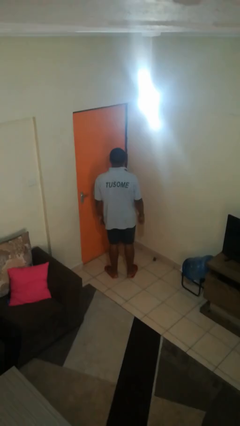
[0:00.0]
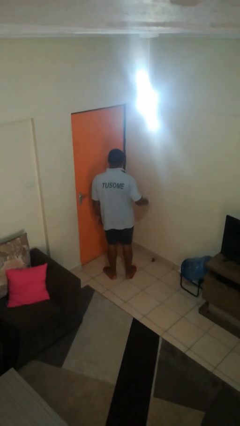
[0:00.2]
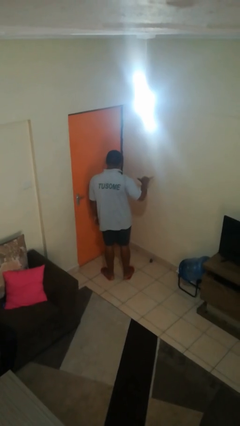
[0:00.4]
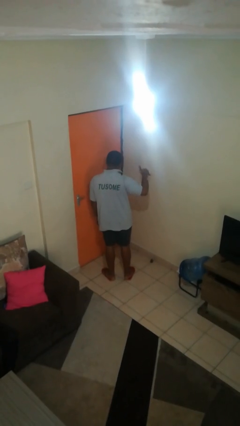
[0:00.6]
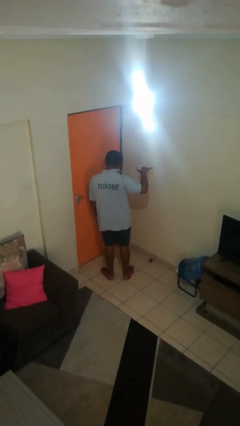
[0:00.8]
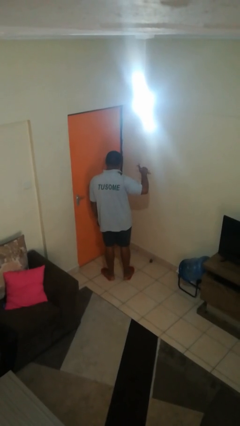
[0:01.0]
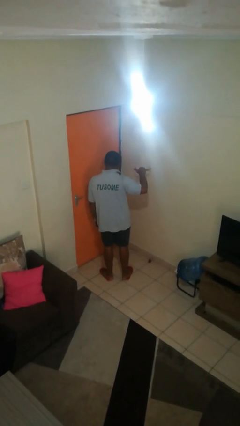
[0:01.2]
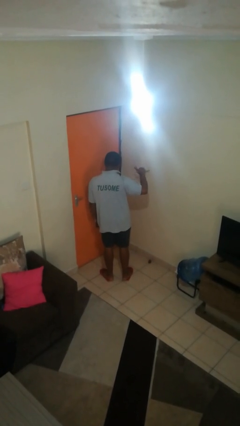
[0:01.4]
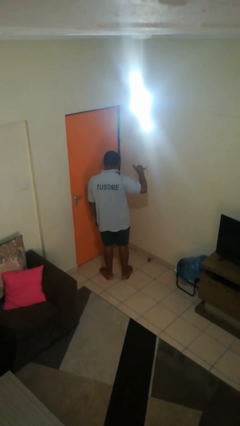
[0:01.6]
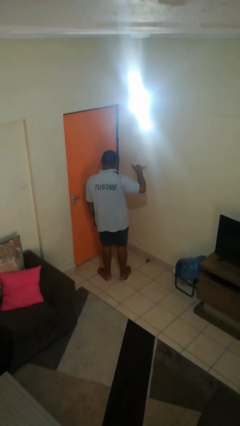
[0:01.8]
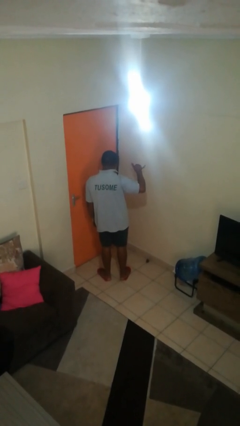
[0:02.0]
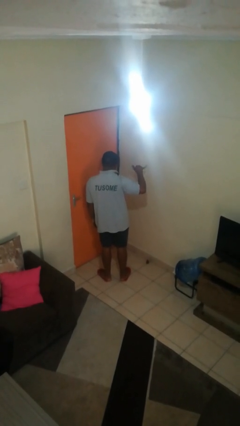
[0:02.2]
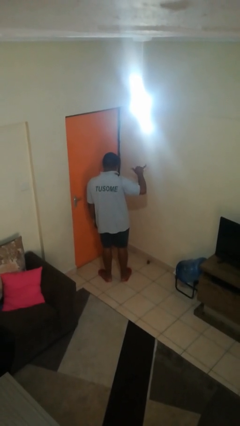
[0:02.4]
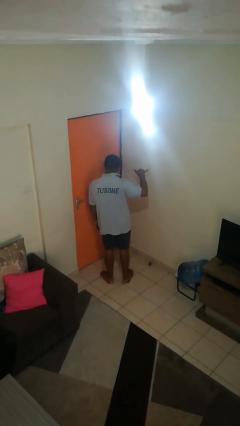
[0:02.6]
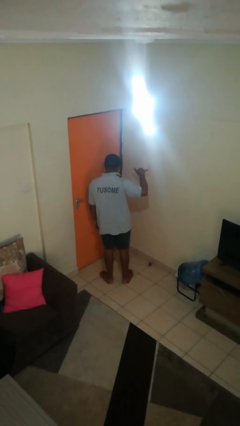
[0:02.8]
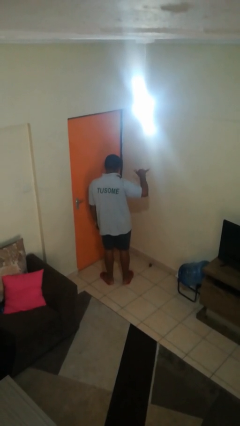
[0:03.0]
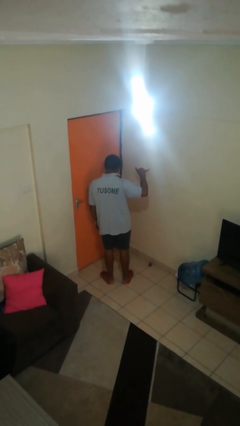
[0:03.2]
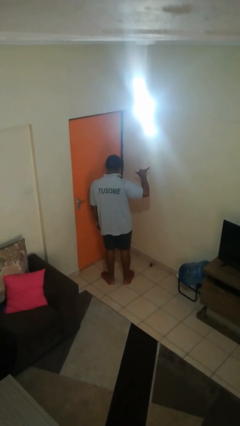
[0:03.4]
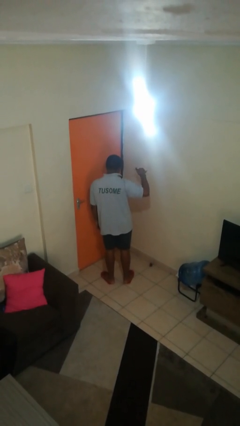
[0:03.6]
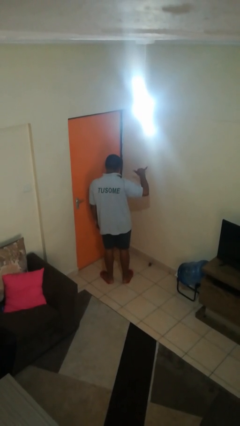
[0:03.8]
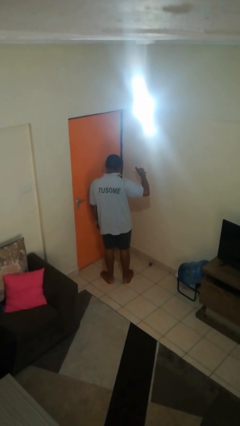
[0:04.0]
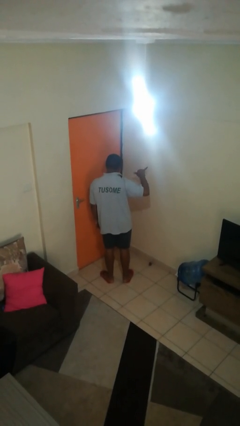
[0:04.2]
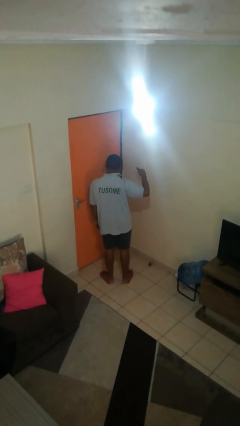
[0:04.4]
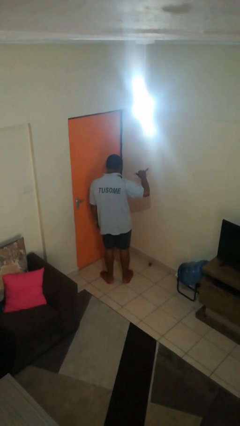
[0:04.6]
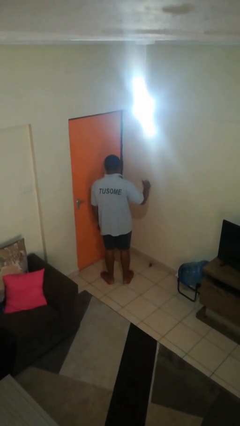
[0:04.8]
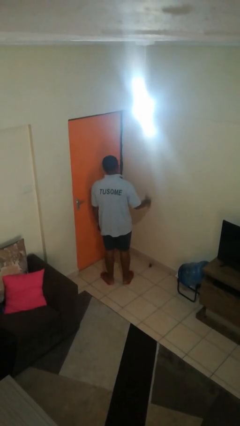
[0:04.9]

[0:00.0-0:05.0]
person gestures hang loose

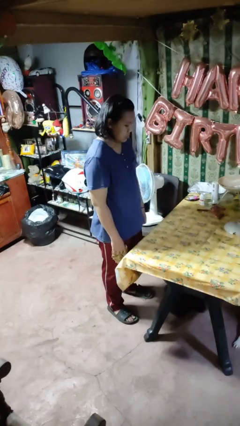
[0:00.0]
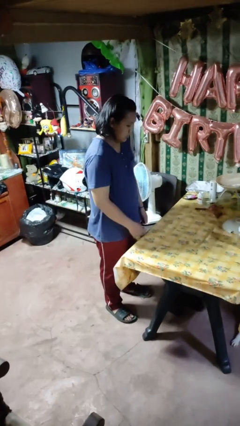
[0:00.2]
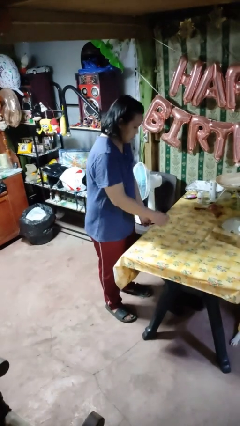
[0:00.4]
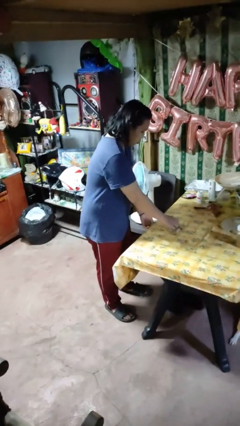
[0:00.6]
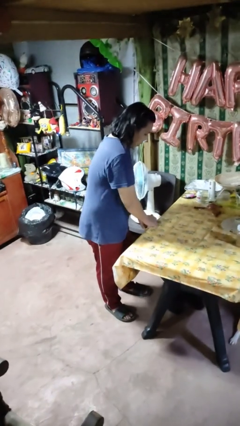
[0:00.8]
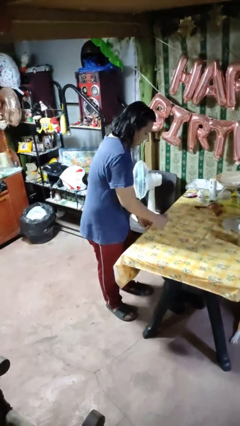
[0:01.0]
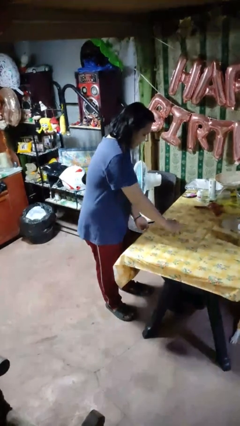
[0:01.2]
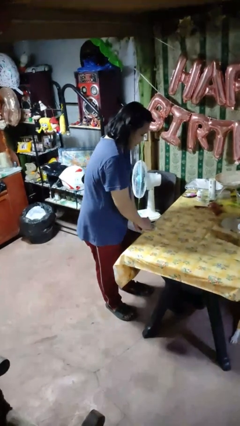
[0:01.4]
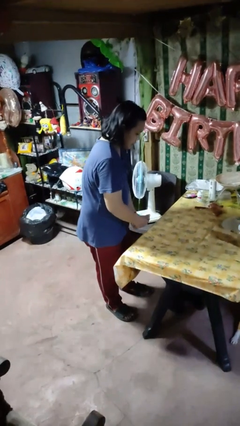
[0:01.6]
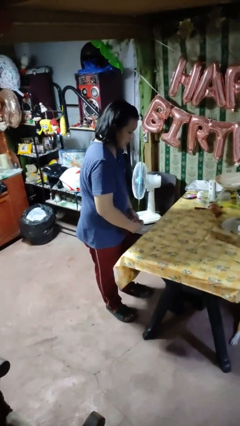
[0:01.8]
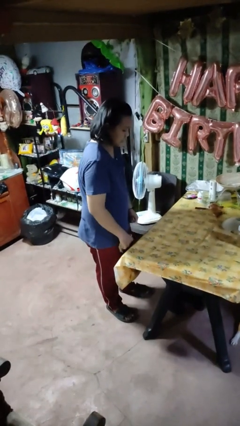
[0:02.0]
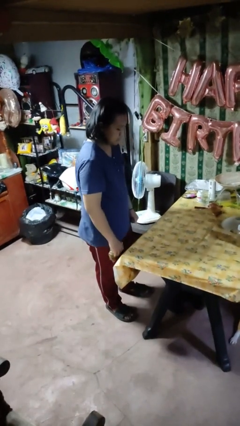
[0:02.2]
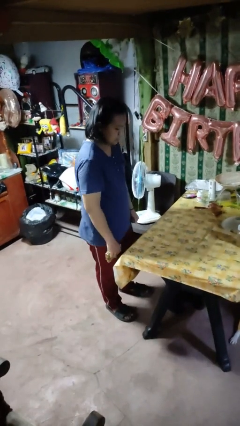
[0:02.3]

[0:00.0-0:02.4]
person cleans table with rag

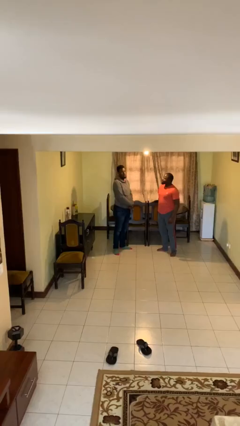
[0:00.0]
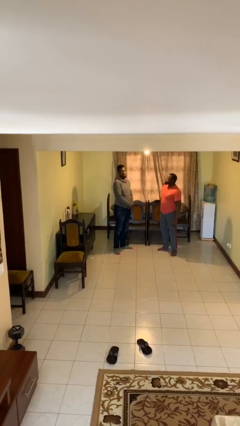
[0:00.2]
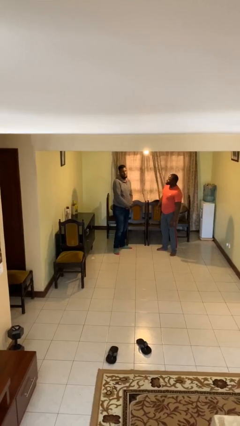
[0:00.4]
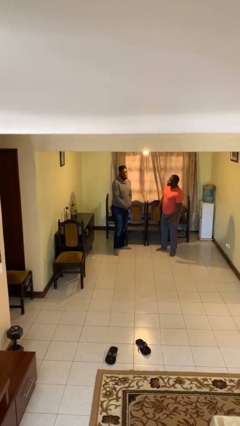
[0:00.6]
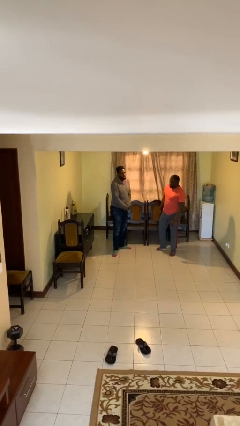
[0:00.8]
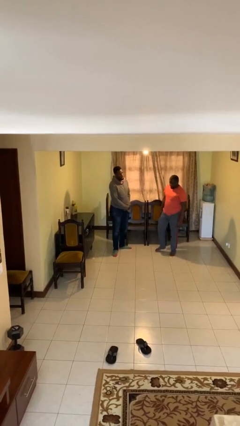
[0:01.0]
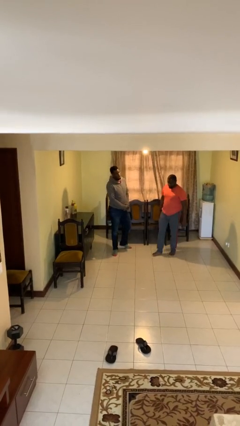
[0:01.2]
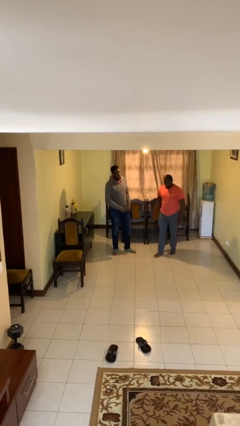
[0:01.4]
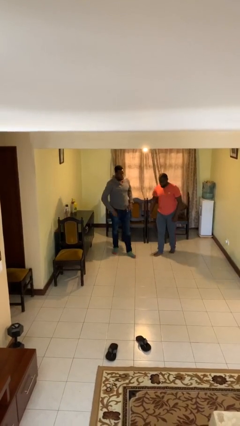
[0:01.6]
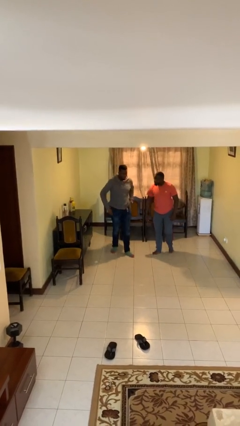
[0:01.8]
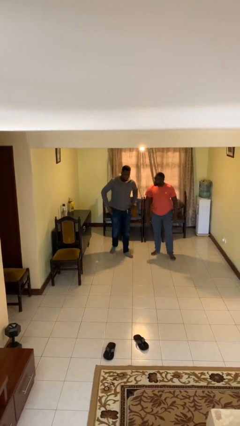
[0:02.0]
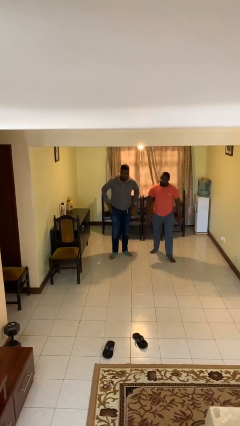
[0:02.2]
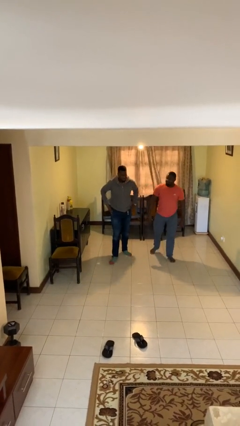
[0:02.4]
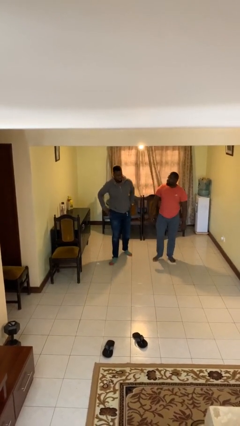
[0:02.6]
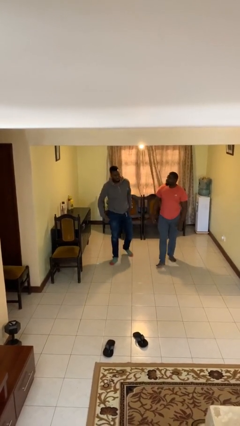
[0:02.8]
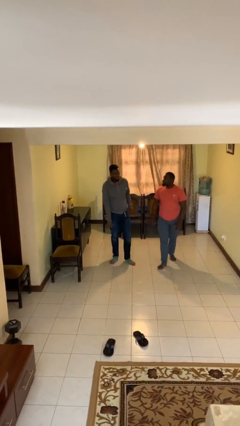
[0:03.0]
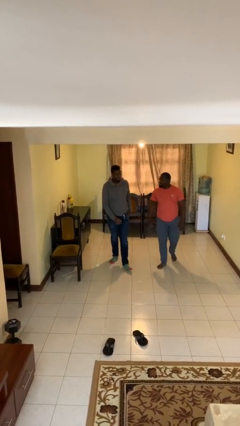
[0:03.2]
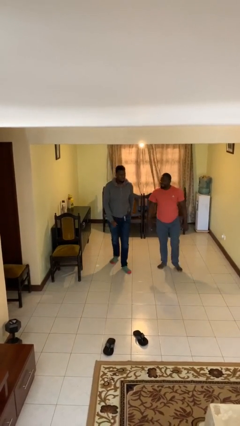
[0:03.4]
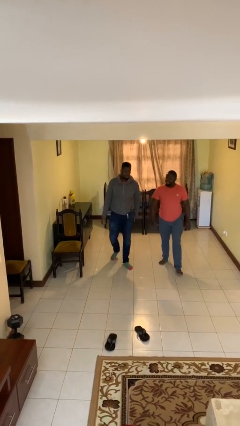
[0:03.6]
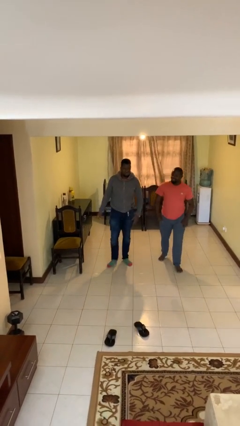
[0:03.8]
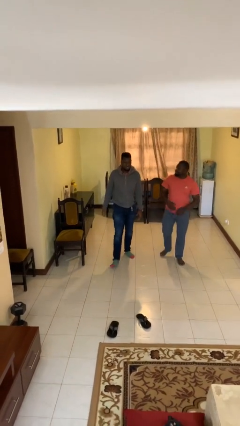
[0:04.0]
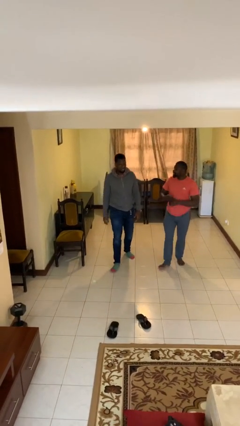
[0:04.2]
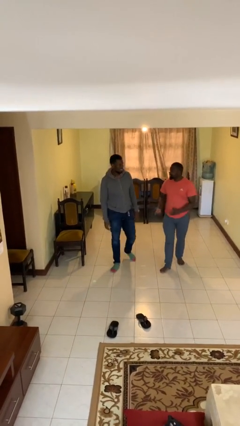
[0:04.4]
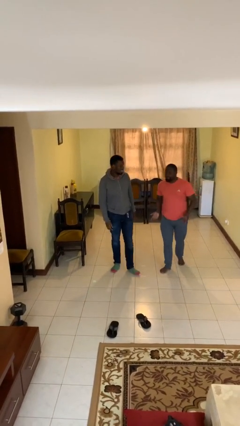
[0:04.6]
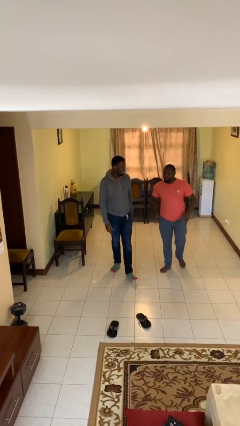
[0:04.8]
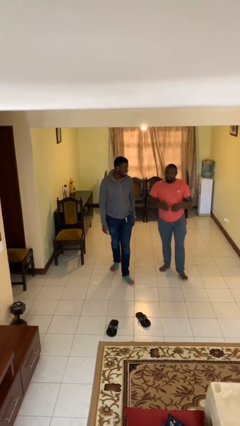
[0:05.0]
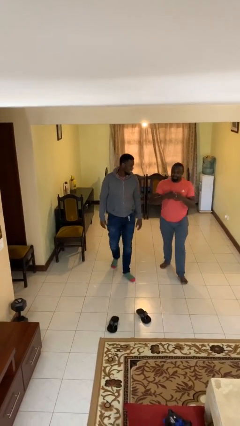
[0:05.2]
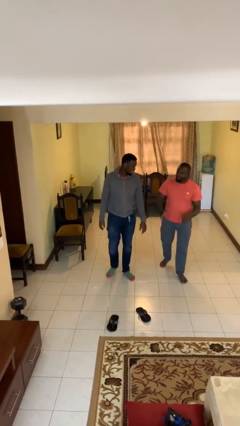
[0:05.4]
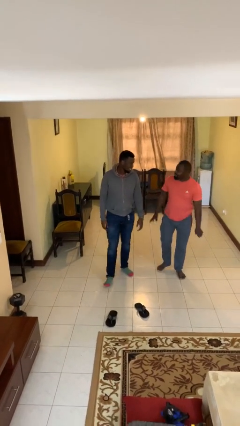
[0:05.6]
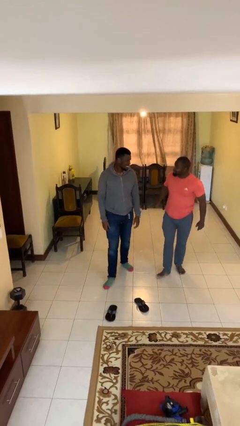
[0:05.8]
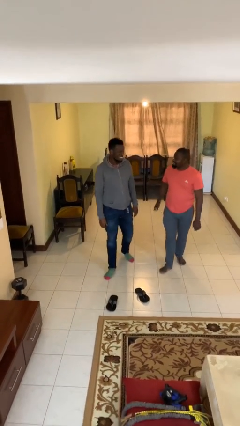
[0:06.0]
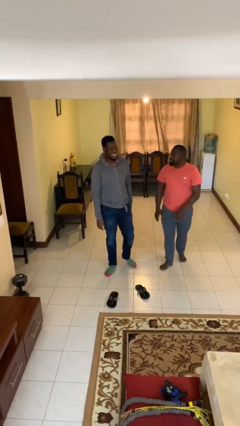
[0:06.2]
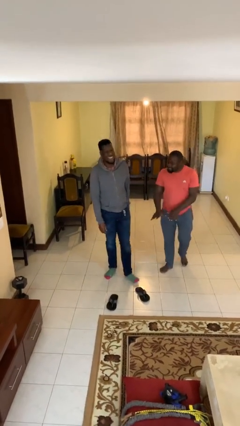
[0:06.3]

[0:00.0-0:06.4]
person talks to person

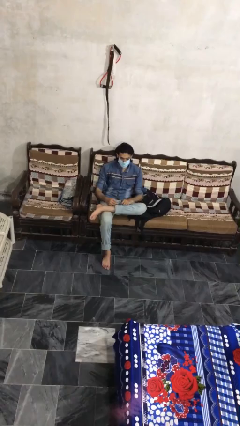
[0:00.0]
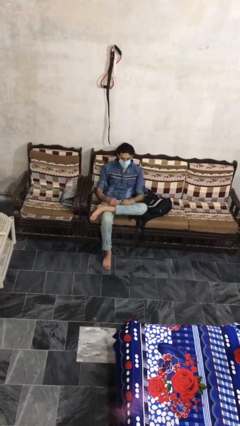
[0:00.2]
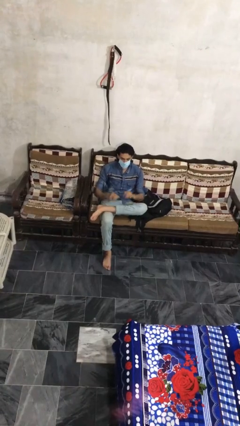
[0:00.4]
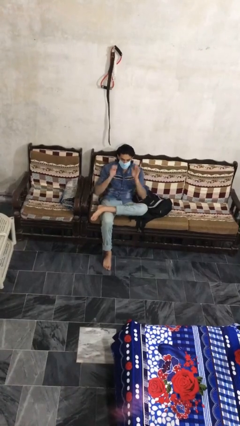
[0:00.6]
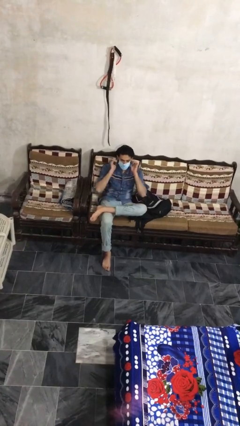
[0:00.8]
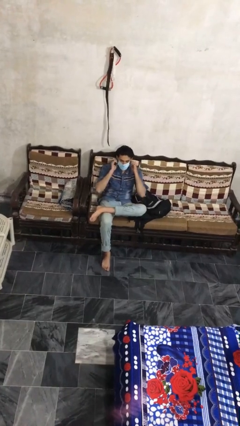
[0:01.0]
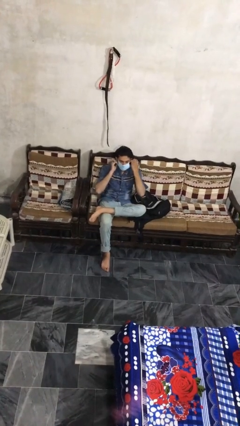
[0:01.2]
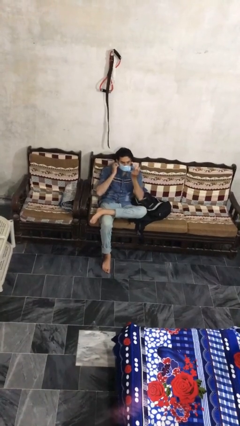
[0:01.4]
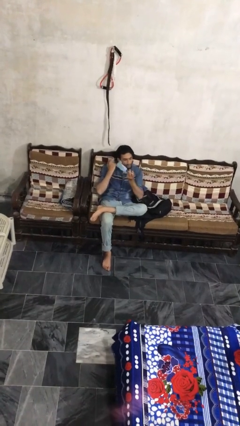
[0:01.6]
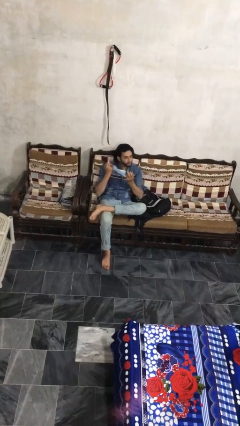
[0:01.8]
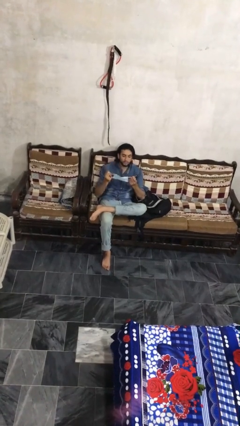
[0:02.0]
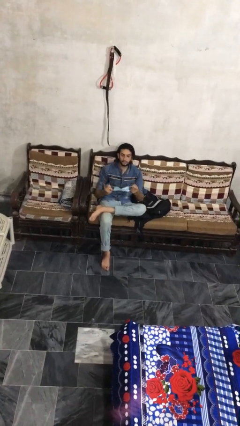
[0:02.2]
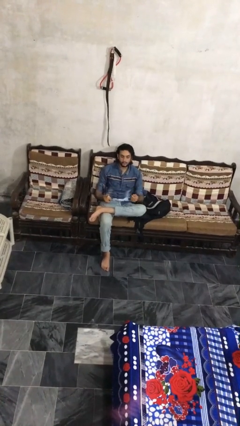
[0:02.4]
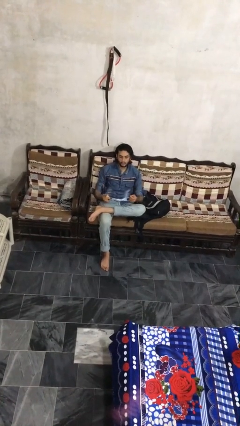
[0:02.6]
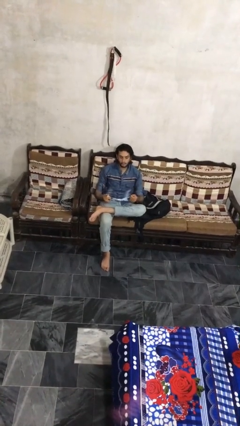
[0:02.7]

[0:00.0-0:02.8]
person takes off facemask

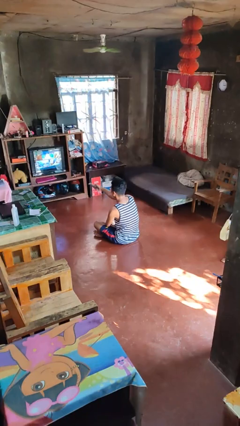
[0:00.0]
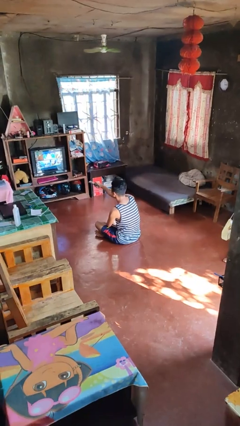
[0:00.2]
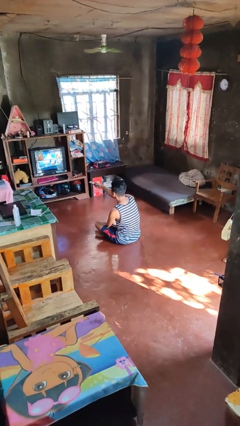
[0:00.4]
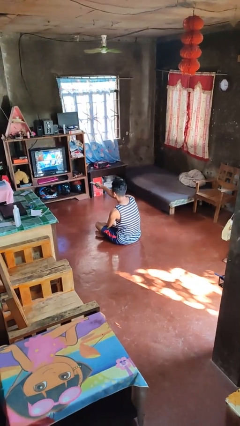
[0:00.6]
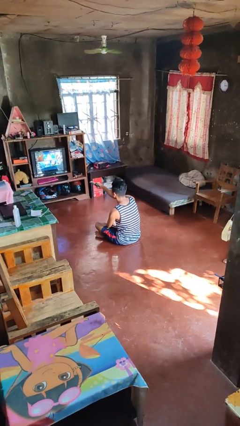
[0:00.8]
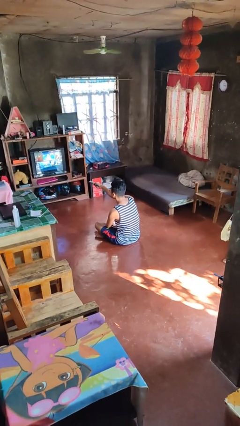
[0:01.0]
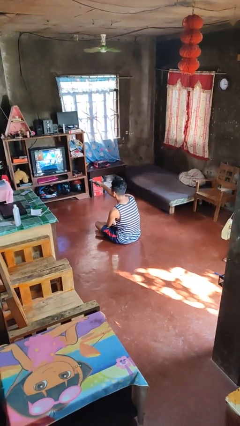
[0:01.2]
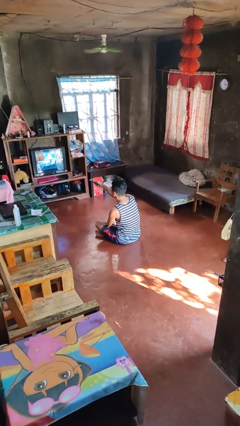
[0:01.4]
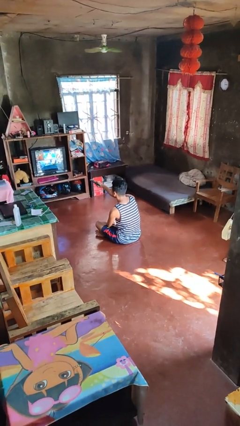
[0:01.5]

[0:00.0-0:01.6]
person uses television remote
